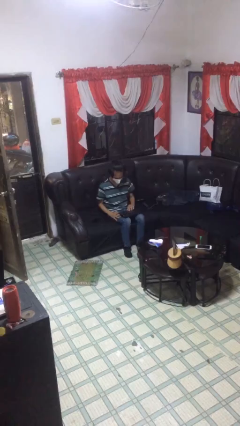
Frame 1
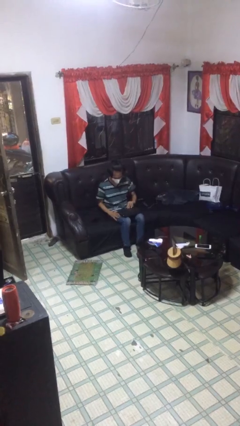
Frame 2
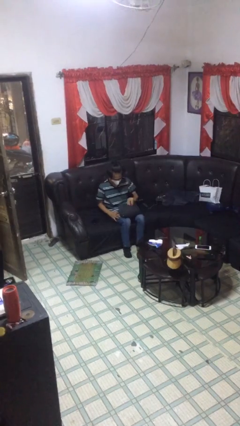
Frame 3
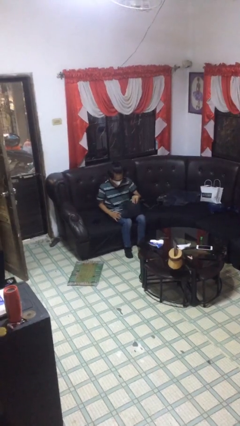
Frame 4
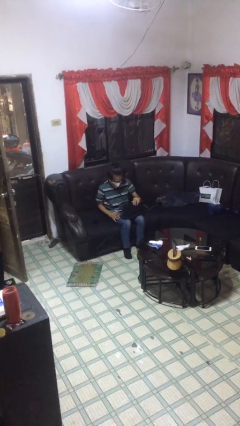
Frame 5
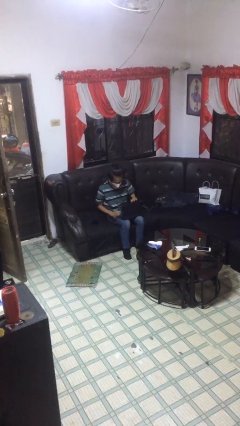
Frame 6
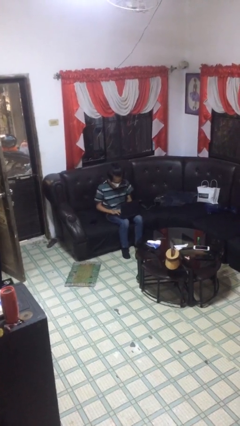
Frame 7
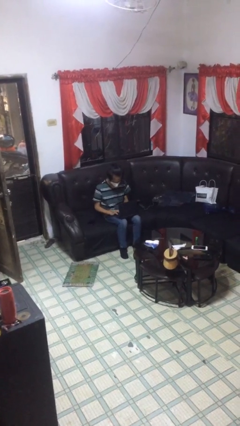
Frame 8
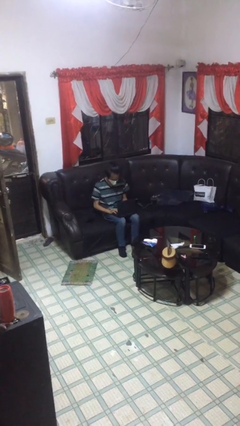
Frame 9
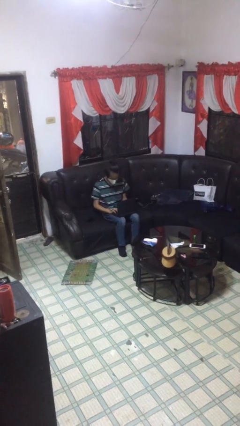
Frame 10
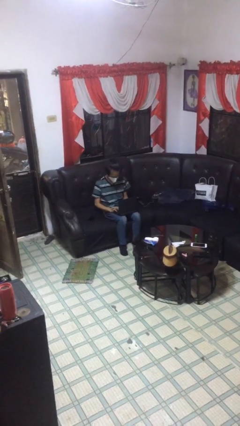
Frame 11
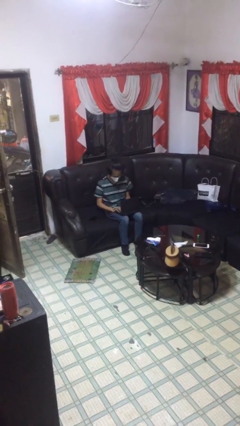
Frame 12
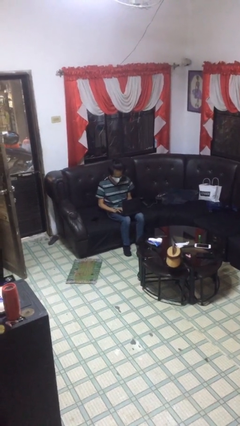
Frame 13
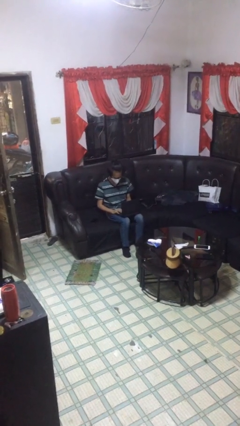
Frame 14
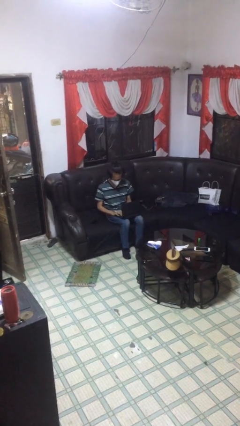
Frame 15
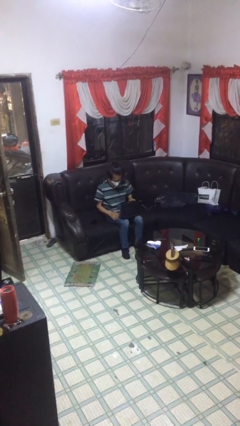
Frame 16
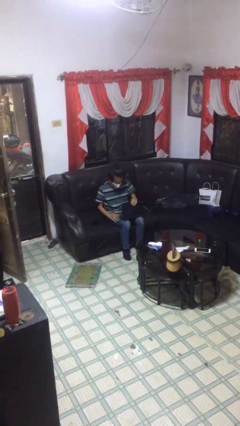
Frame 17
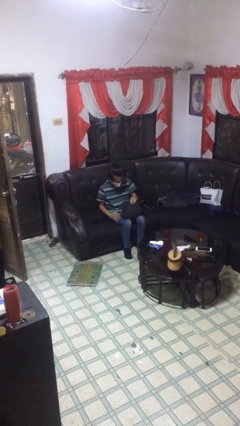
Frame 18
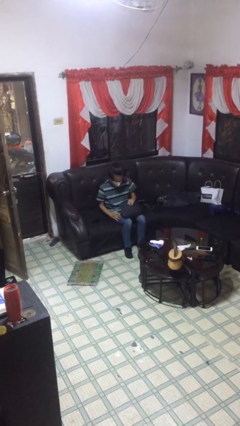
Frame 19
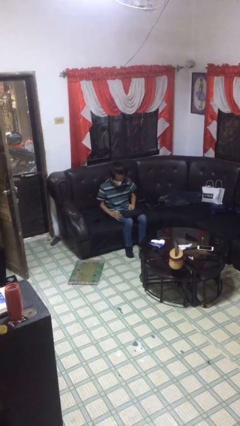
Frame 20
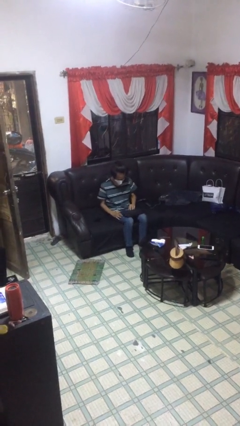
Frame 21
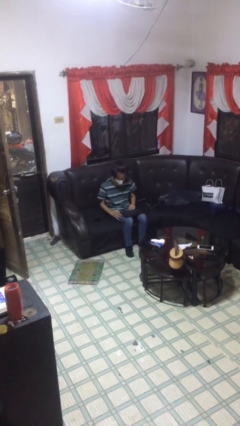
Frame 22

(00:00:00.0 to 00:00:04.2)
person interacts with laptop

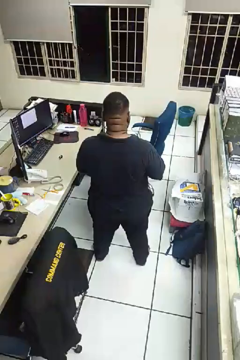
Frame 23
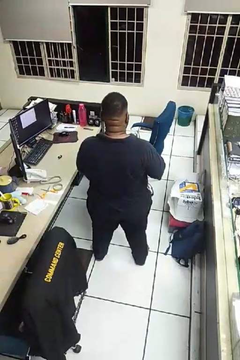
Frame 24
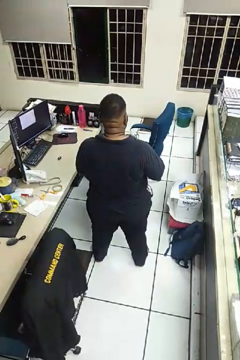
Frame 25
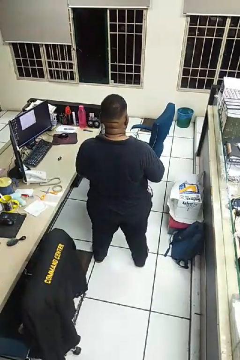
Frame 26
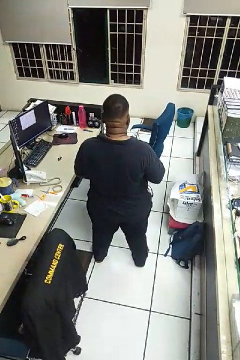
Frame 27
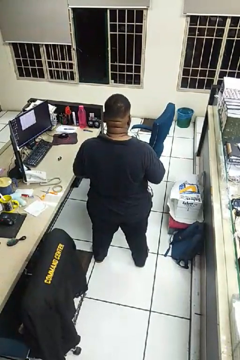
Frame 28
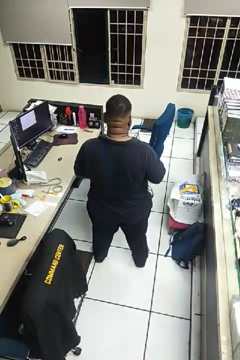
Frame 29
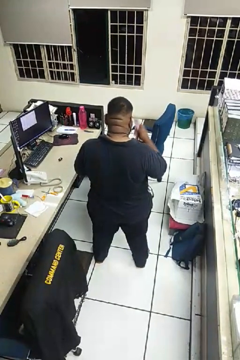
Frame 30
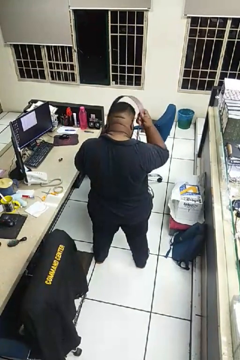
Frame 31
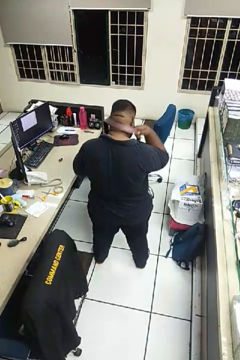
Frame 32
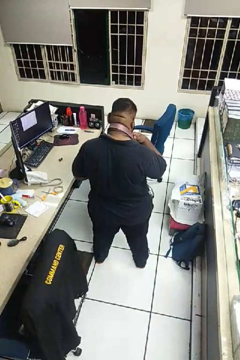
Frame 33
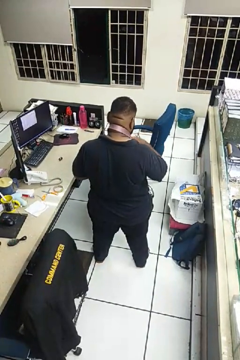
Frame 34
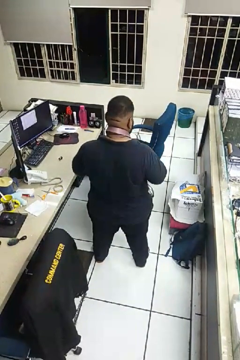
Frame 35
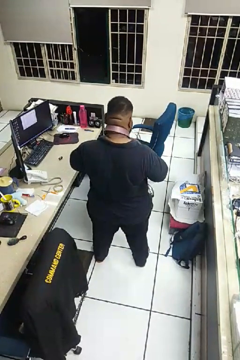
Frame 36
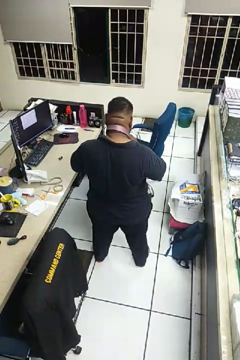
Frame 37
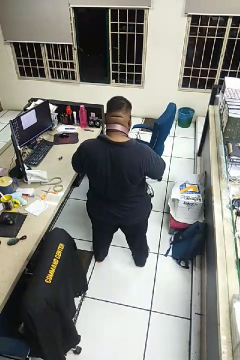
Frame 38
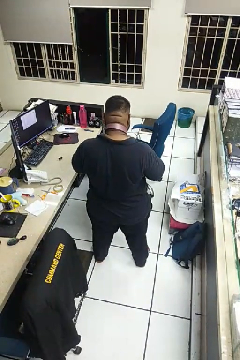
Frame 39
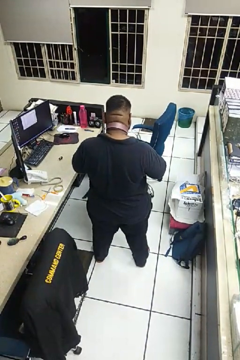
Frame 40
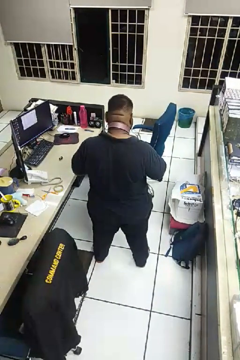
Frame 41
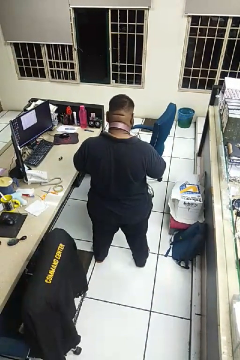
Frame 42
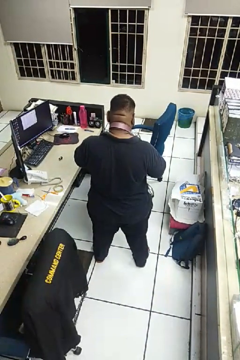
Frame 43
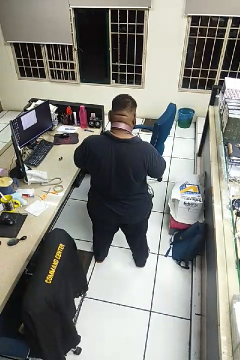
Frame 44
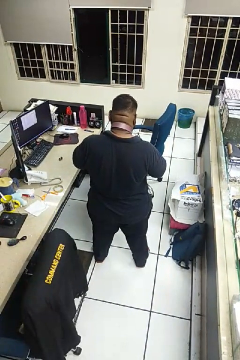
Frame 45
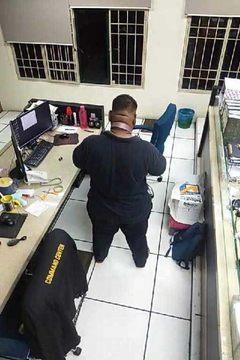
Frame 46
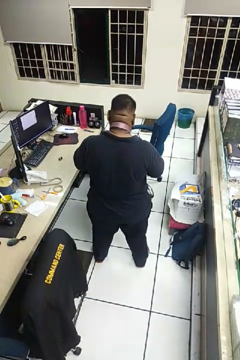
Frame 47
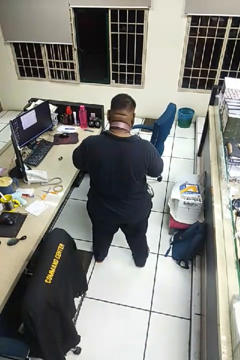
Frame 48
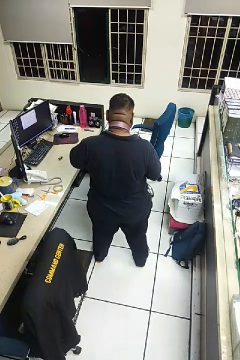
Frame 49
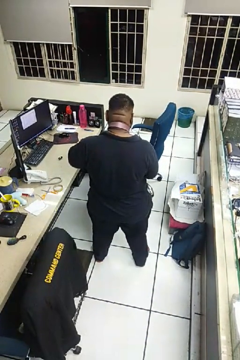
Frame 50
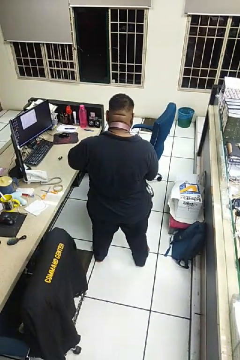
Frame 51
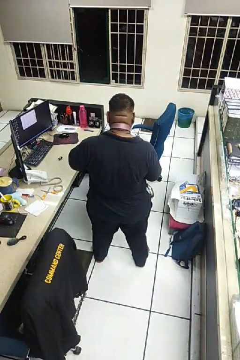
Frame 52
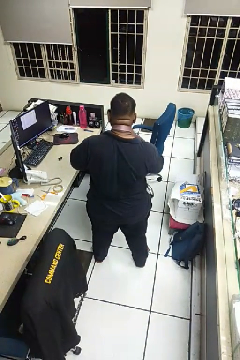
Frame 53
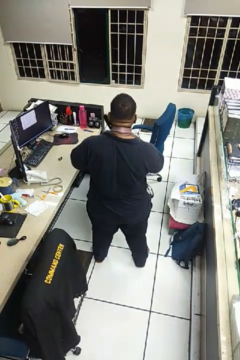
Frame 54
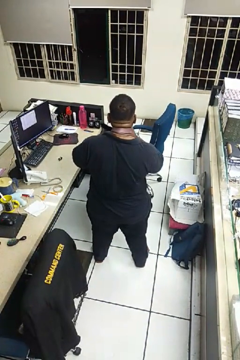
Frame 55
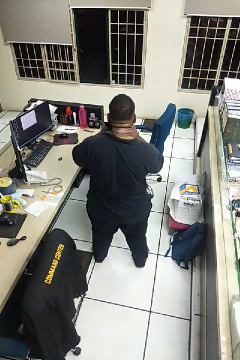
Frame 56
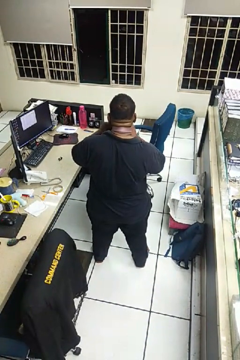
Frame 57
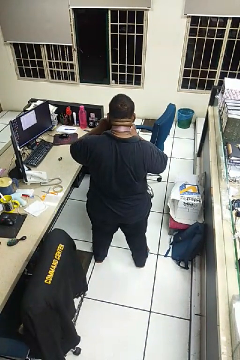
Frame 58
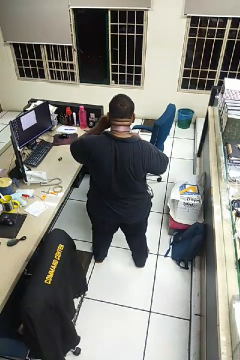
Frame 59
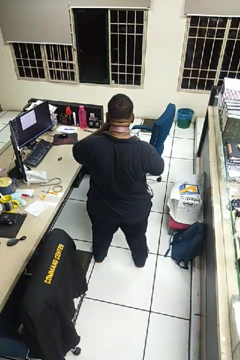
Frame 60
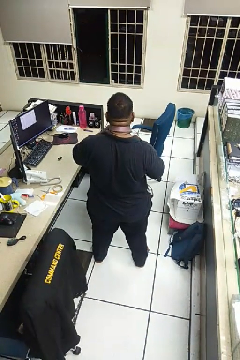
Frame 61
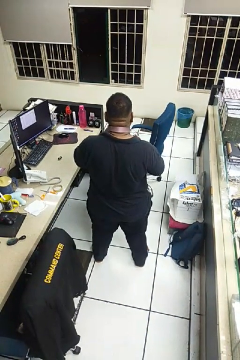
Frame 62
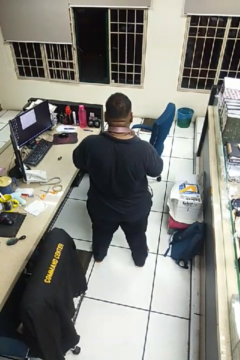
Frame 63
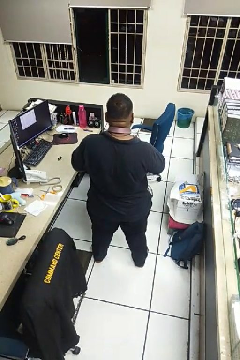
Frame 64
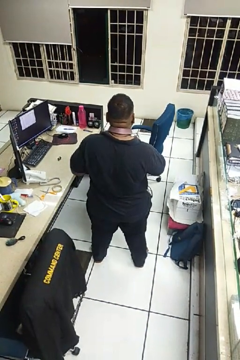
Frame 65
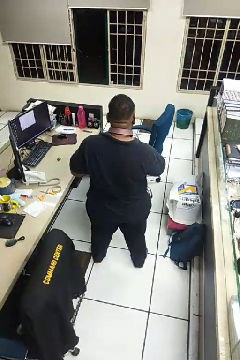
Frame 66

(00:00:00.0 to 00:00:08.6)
person puts on necktie

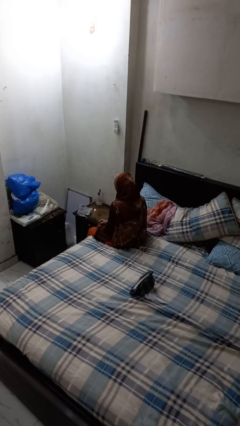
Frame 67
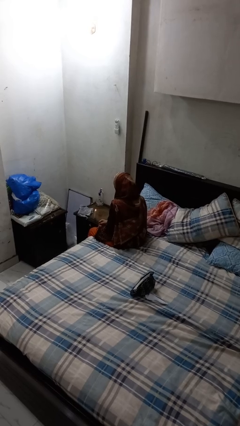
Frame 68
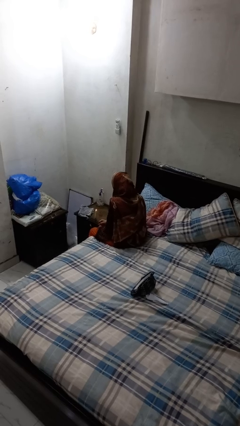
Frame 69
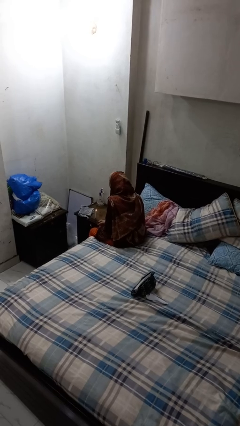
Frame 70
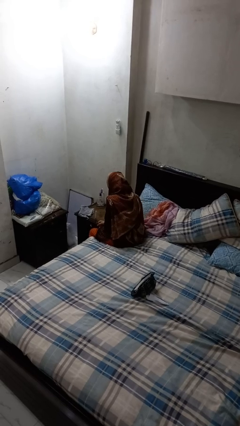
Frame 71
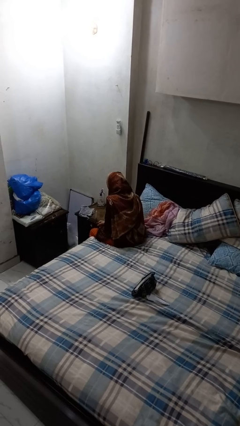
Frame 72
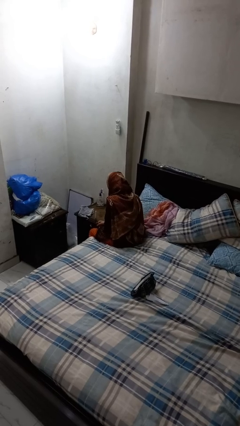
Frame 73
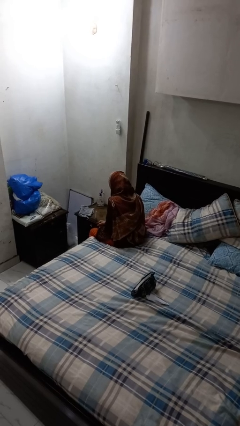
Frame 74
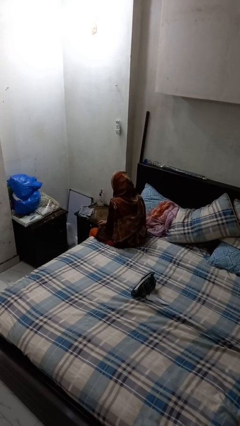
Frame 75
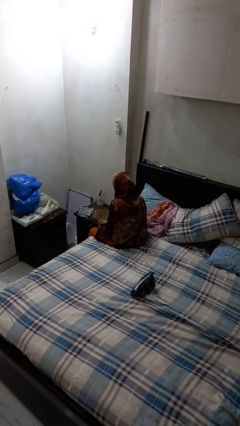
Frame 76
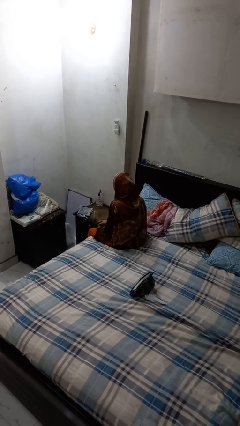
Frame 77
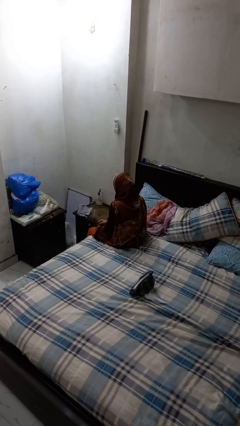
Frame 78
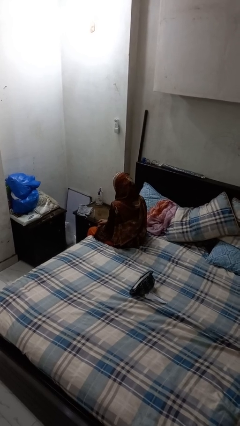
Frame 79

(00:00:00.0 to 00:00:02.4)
person extinguishes candle

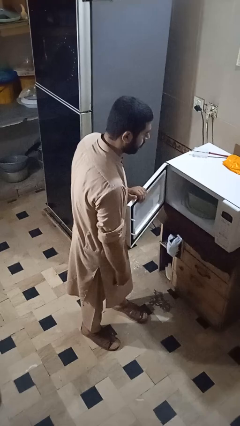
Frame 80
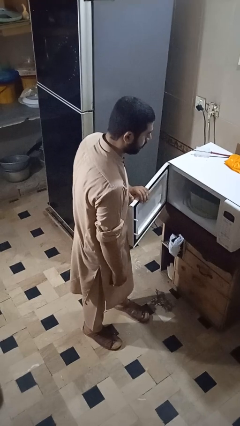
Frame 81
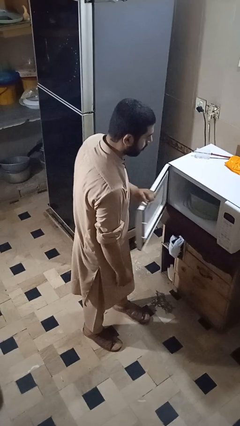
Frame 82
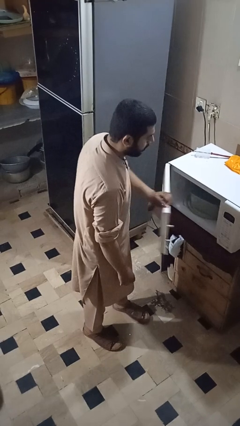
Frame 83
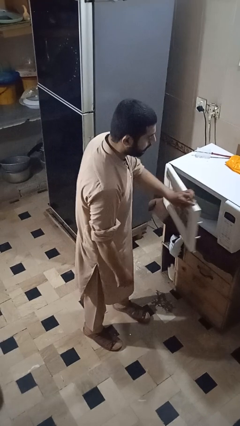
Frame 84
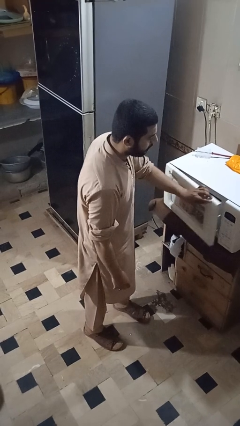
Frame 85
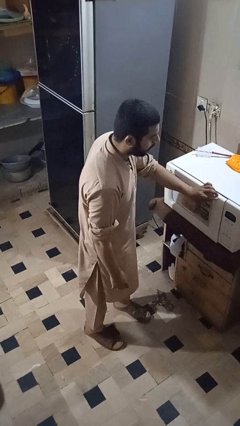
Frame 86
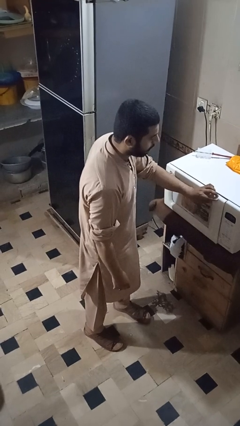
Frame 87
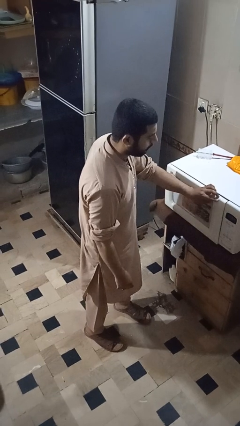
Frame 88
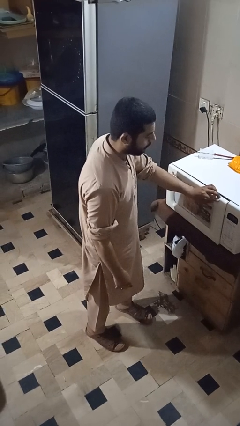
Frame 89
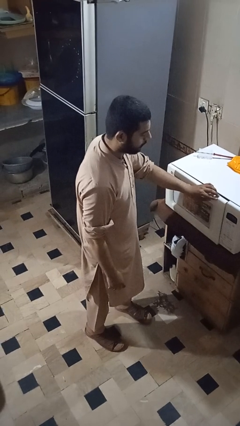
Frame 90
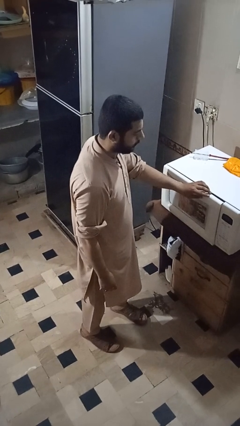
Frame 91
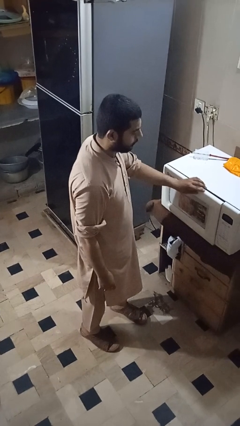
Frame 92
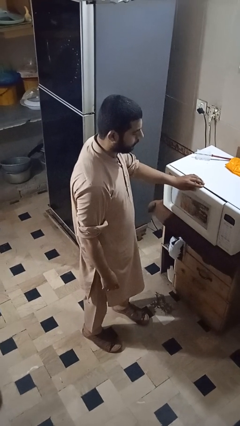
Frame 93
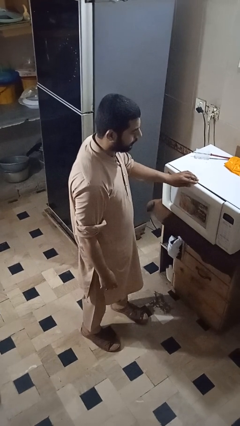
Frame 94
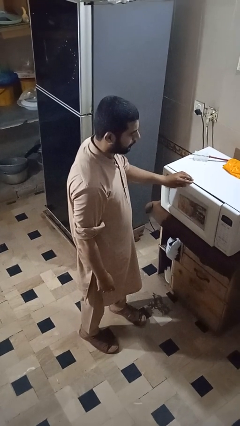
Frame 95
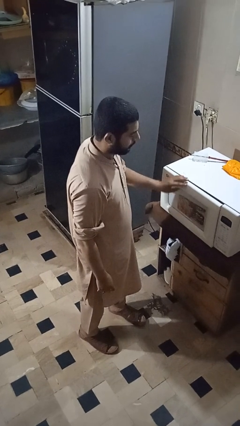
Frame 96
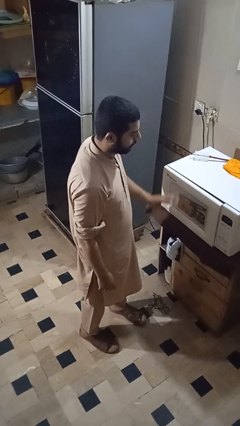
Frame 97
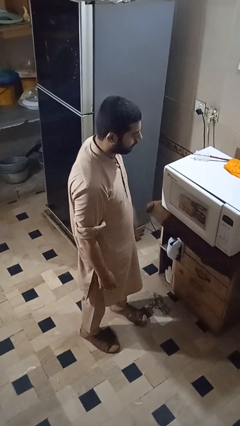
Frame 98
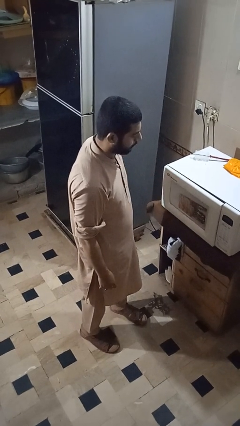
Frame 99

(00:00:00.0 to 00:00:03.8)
person closes microwave

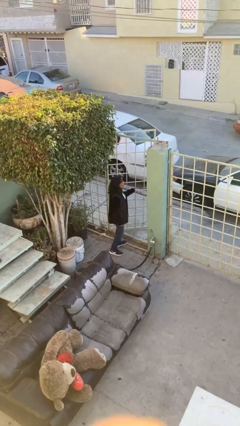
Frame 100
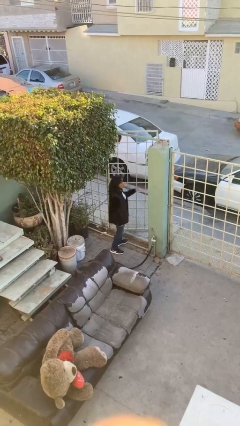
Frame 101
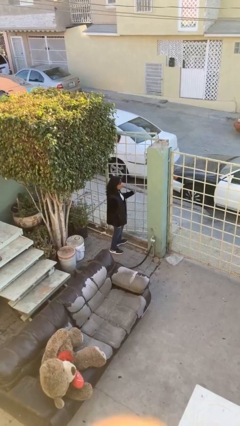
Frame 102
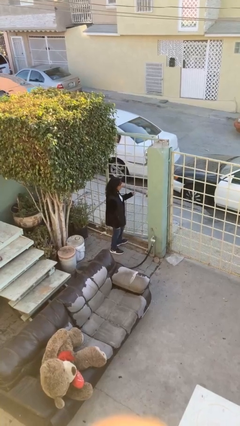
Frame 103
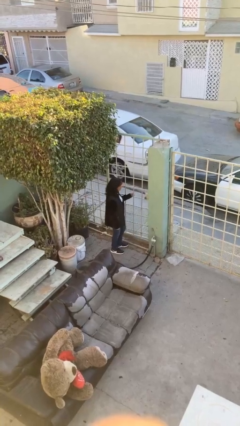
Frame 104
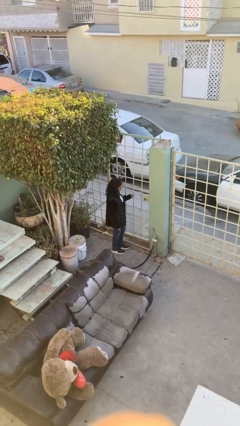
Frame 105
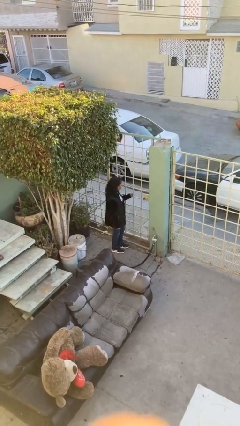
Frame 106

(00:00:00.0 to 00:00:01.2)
person closes facility door
